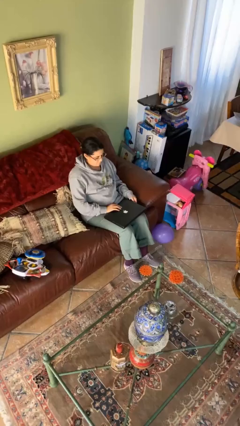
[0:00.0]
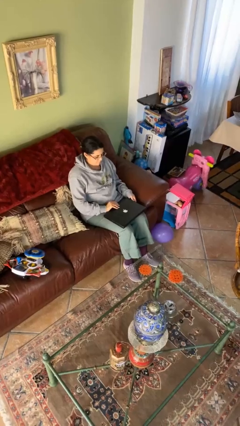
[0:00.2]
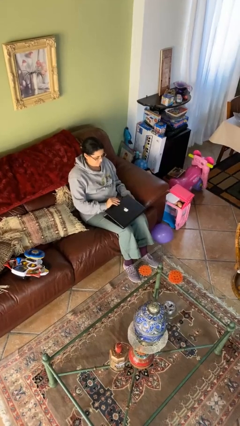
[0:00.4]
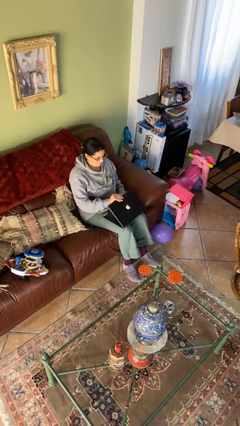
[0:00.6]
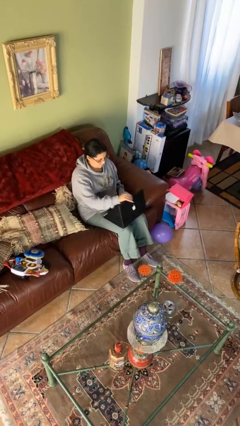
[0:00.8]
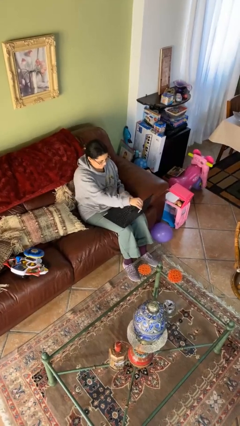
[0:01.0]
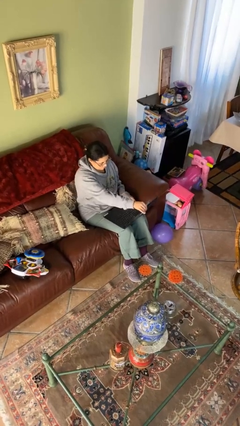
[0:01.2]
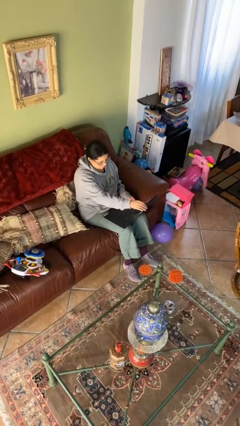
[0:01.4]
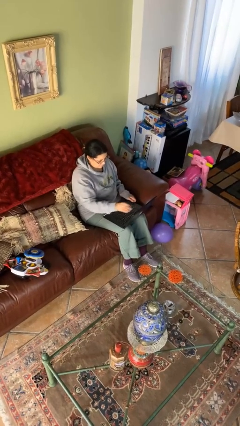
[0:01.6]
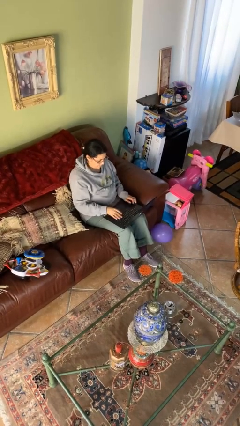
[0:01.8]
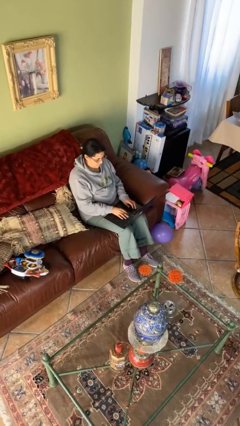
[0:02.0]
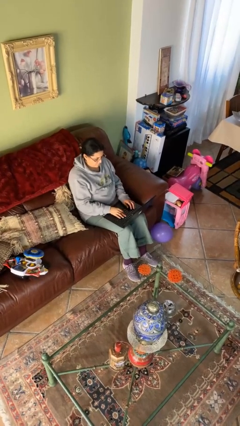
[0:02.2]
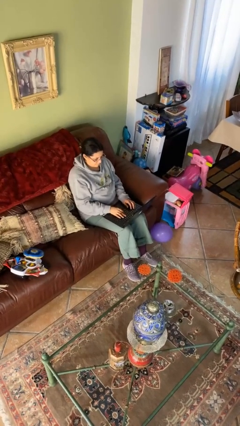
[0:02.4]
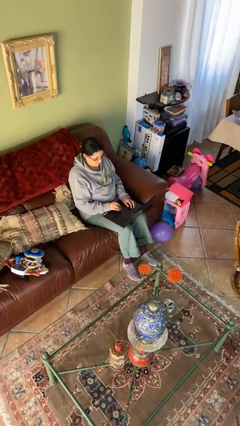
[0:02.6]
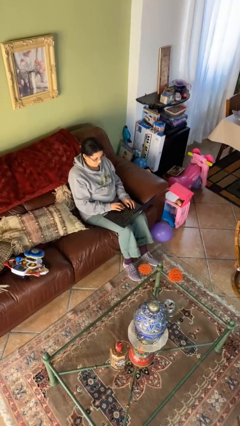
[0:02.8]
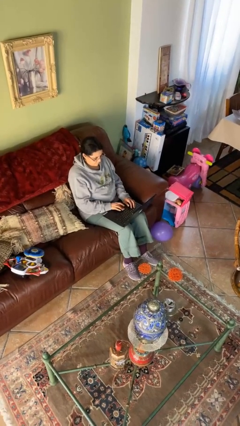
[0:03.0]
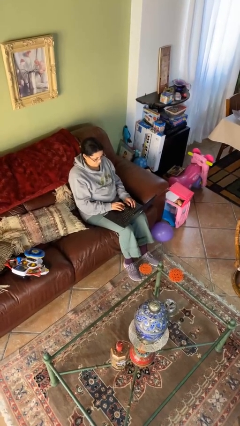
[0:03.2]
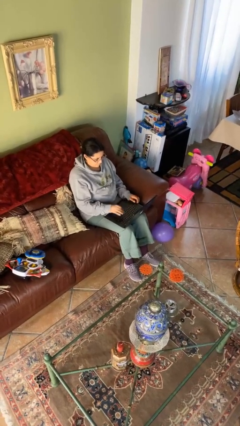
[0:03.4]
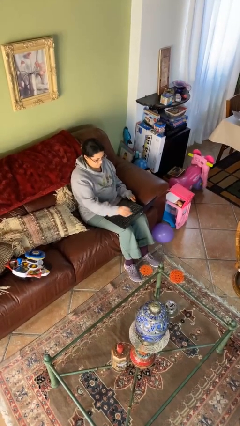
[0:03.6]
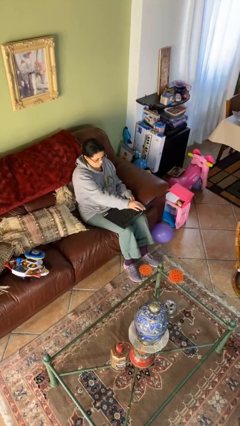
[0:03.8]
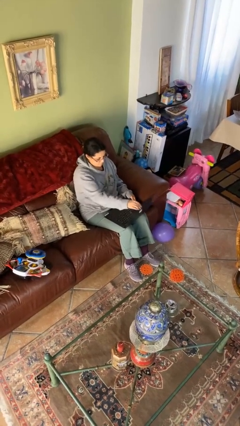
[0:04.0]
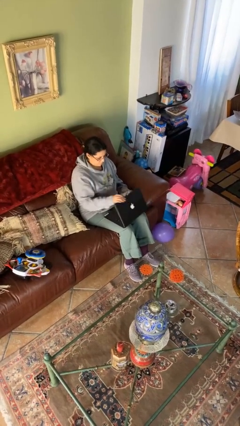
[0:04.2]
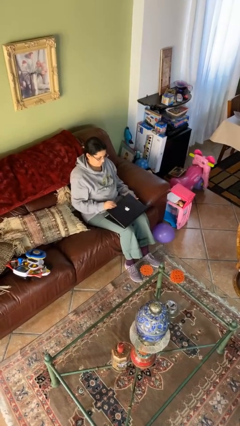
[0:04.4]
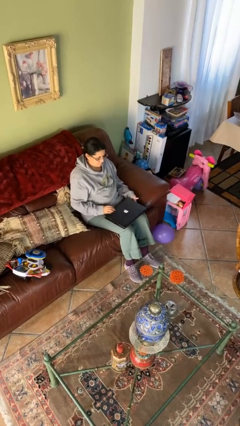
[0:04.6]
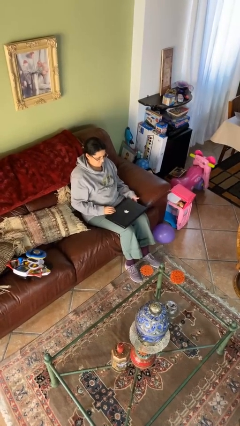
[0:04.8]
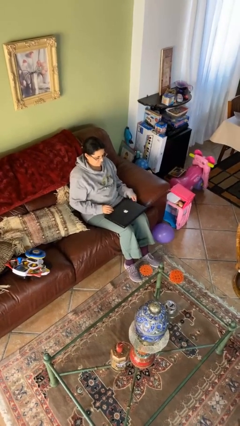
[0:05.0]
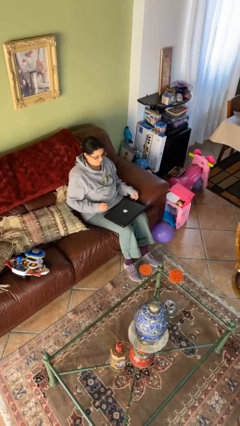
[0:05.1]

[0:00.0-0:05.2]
person interacts with laptop

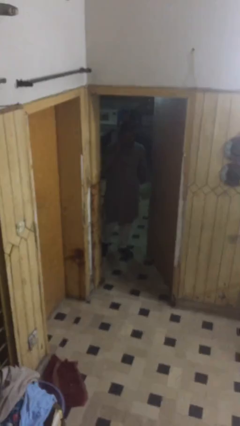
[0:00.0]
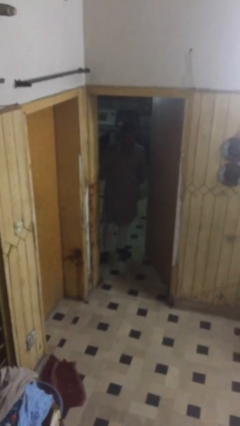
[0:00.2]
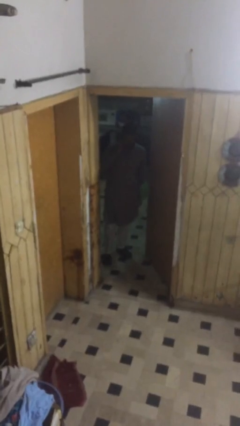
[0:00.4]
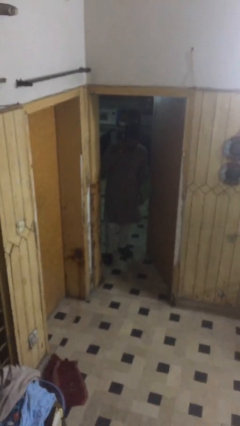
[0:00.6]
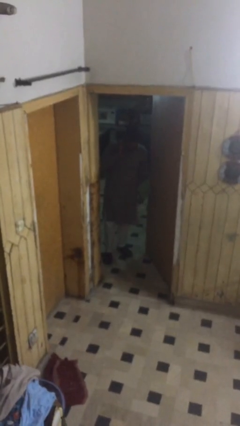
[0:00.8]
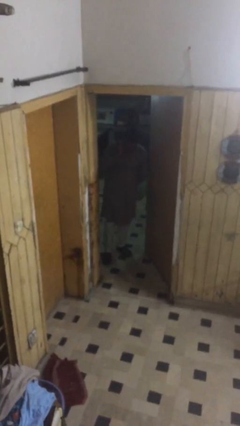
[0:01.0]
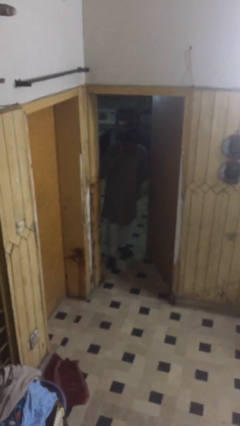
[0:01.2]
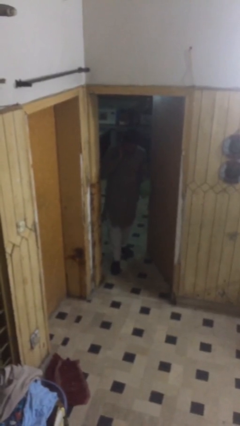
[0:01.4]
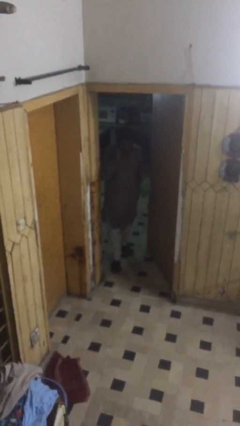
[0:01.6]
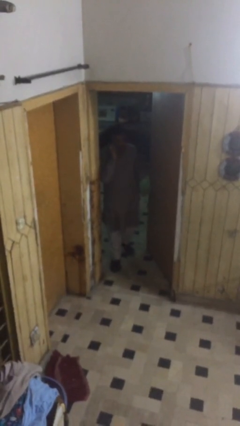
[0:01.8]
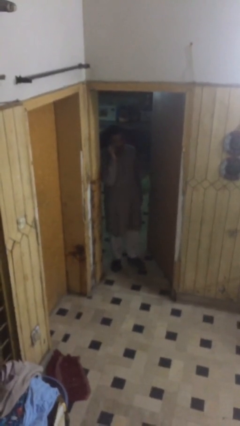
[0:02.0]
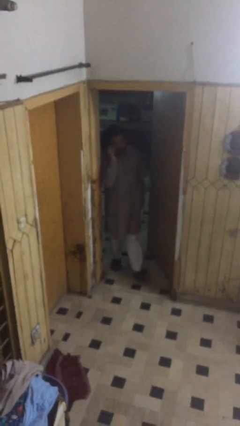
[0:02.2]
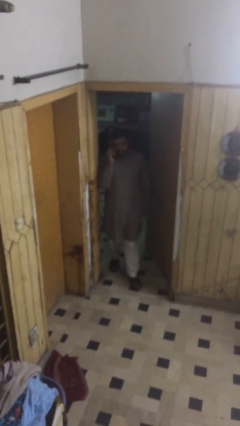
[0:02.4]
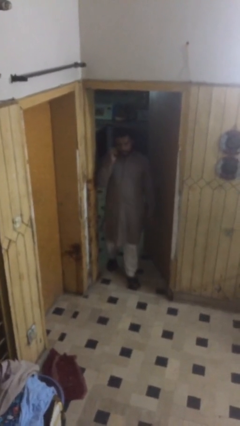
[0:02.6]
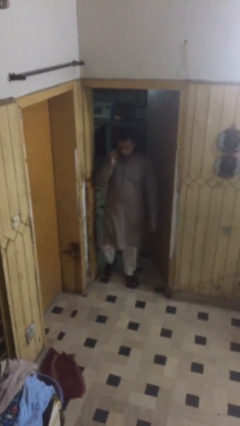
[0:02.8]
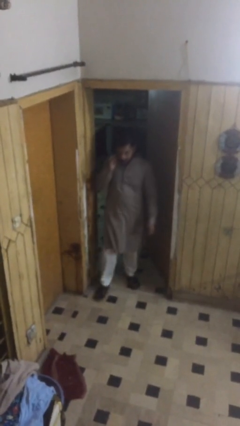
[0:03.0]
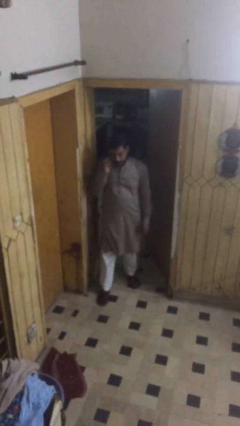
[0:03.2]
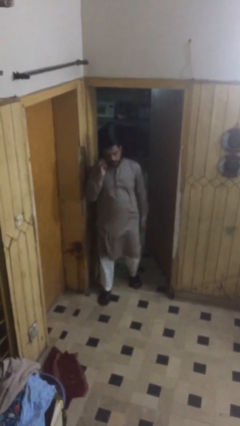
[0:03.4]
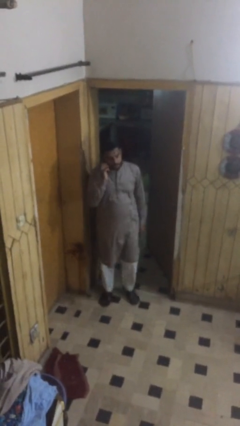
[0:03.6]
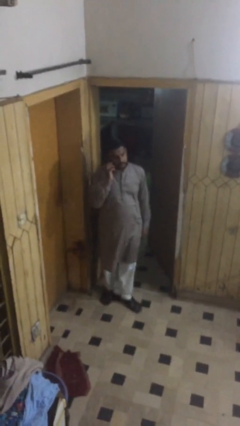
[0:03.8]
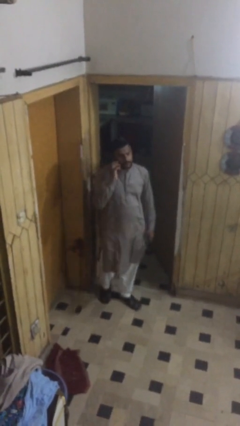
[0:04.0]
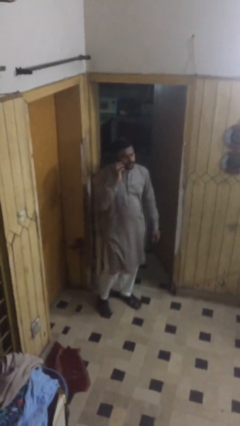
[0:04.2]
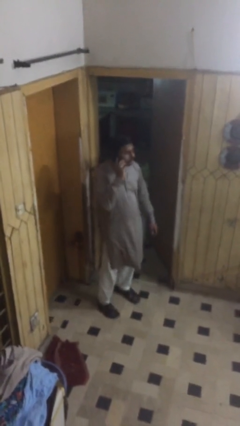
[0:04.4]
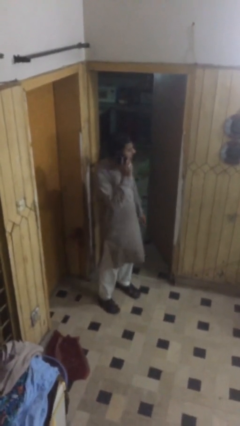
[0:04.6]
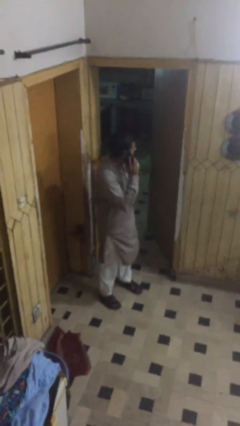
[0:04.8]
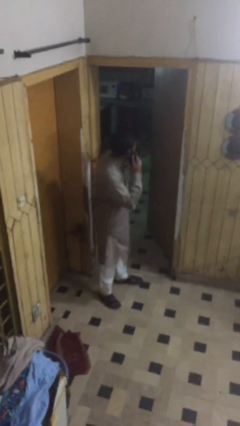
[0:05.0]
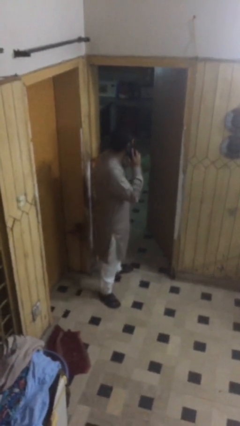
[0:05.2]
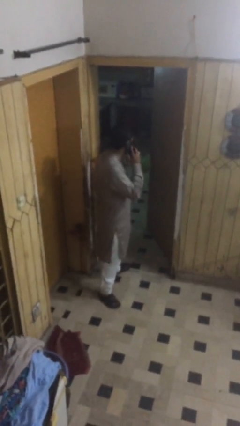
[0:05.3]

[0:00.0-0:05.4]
person enters scene through structure

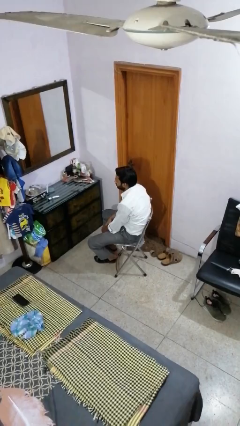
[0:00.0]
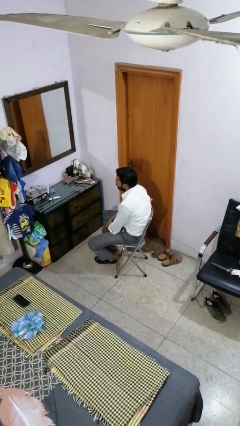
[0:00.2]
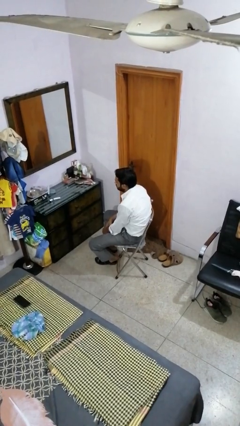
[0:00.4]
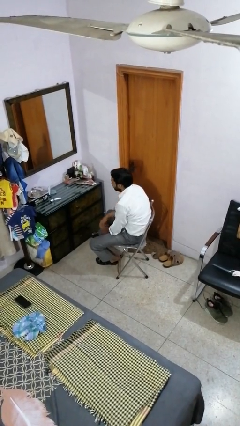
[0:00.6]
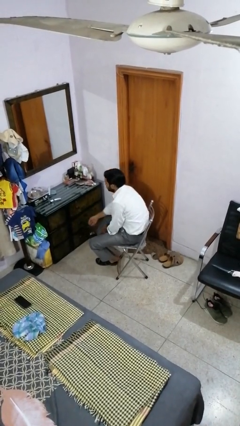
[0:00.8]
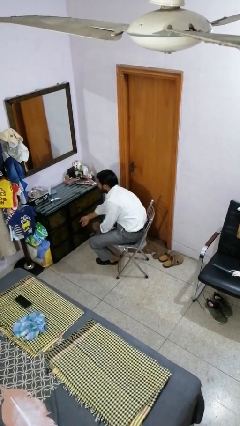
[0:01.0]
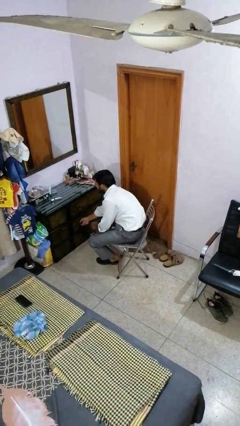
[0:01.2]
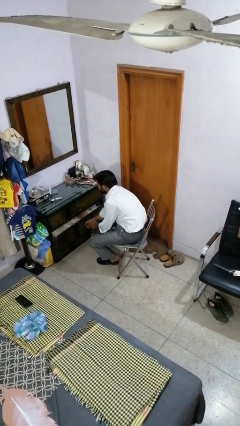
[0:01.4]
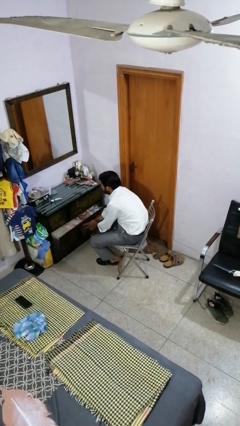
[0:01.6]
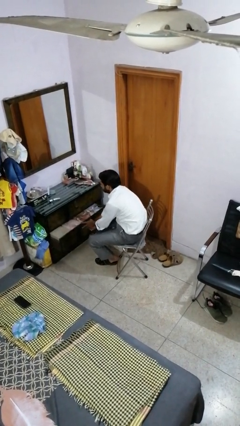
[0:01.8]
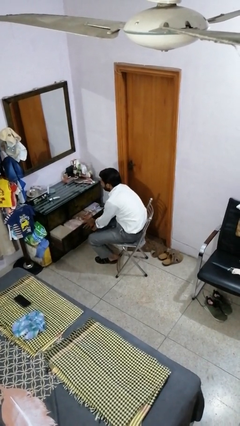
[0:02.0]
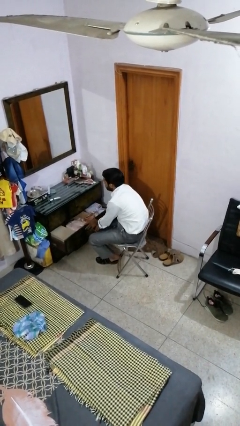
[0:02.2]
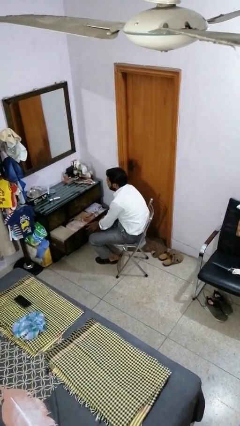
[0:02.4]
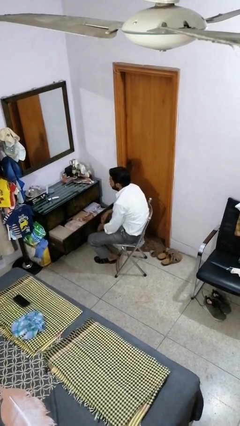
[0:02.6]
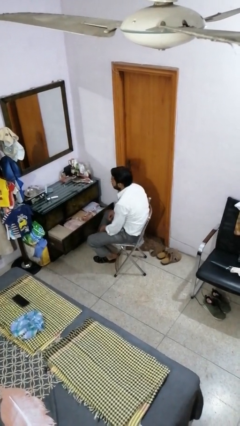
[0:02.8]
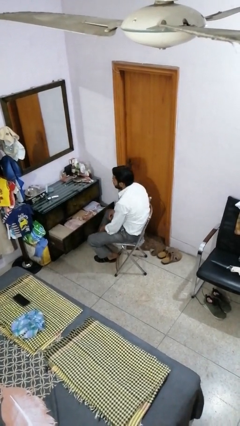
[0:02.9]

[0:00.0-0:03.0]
person opens dresser drawer

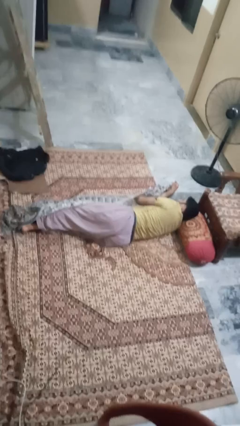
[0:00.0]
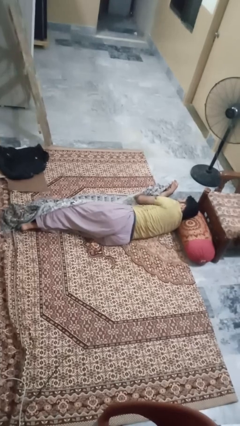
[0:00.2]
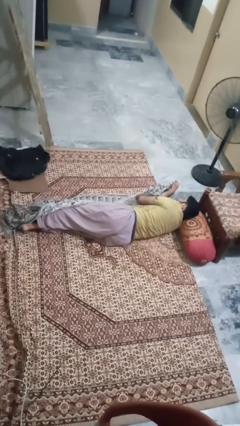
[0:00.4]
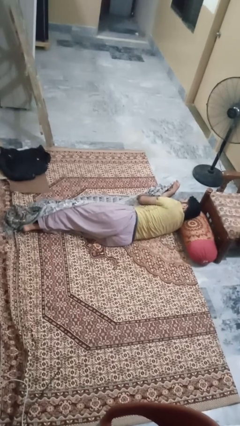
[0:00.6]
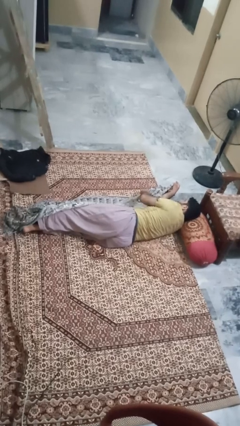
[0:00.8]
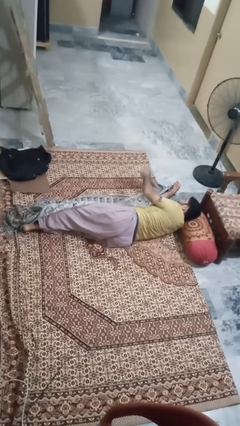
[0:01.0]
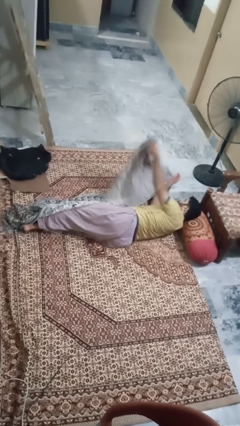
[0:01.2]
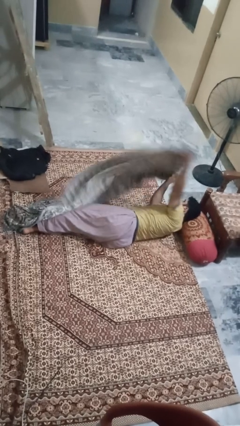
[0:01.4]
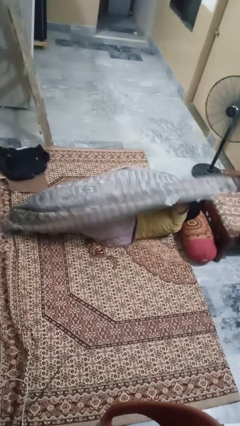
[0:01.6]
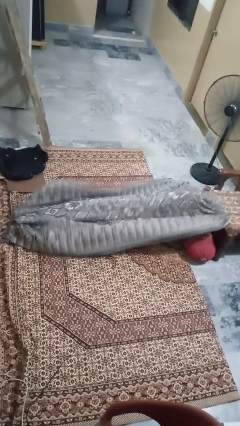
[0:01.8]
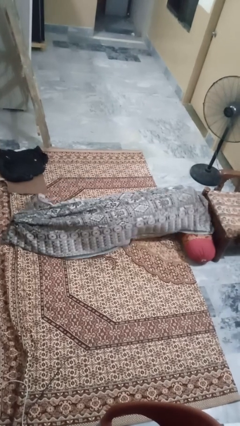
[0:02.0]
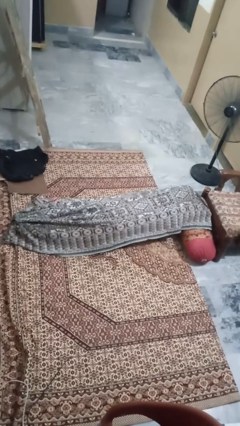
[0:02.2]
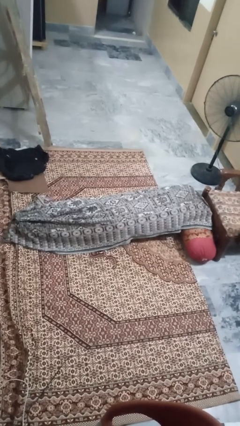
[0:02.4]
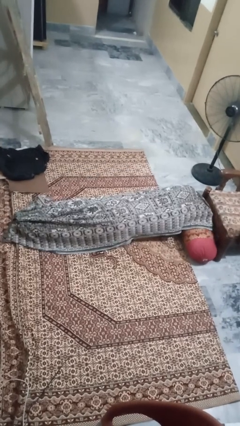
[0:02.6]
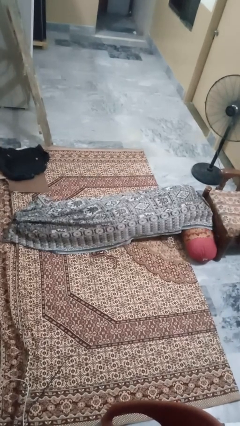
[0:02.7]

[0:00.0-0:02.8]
person covers with blanket

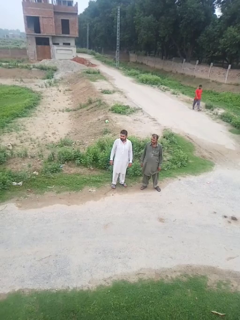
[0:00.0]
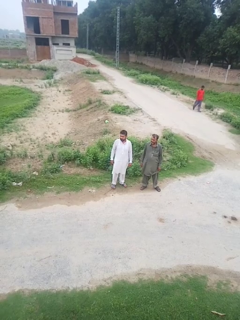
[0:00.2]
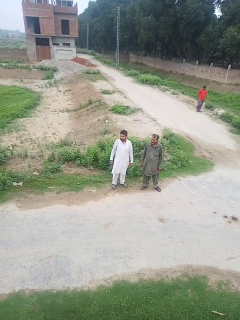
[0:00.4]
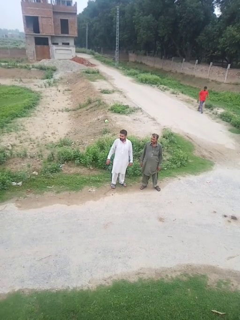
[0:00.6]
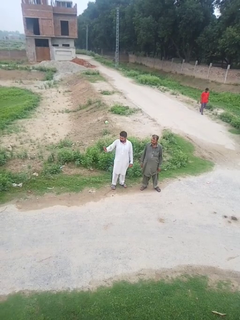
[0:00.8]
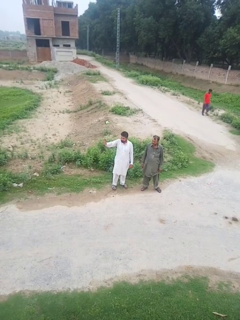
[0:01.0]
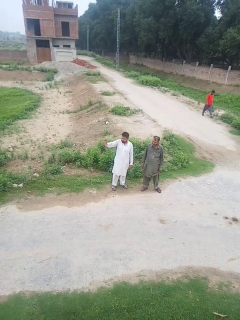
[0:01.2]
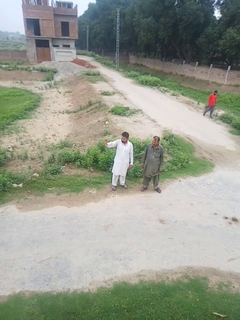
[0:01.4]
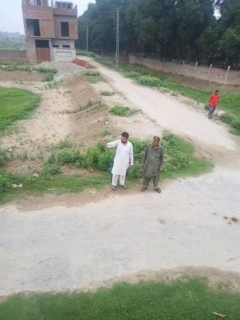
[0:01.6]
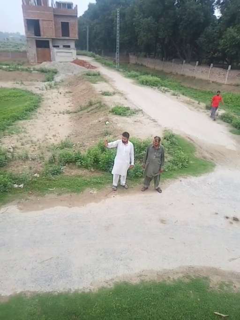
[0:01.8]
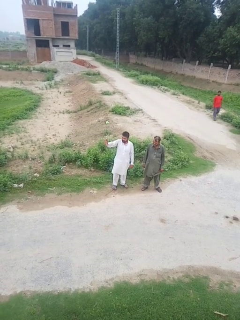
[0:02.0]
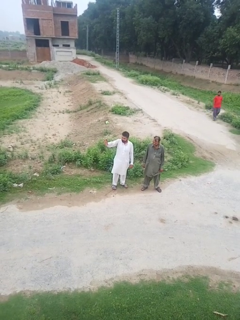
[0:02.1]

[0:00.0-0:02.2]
person waves at person
